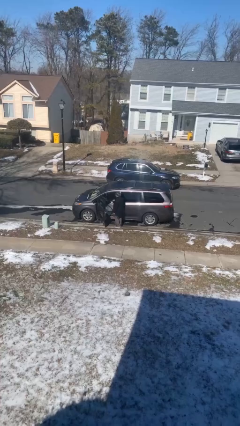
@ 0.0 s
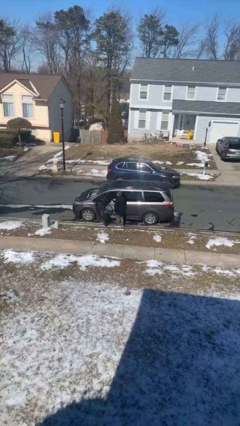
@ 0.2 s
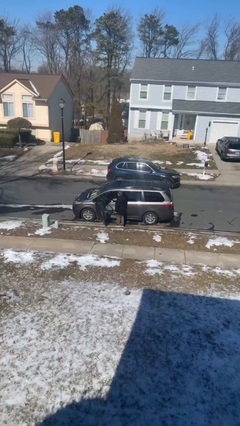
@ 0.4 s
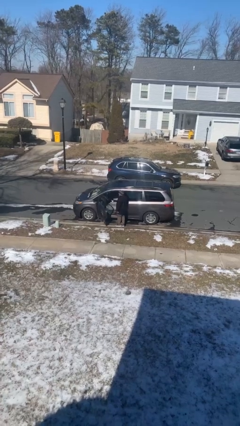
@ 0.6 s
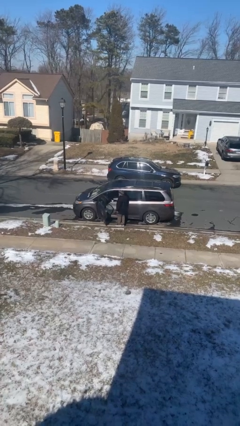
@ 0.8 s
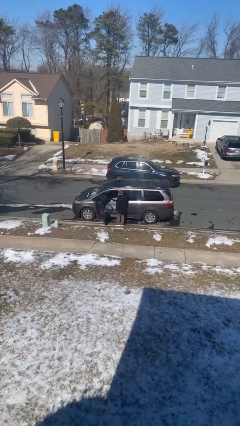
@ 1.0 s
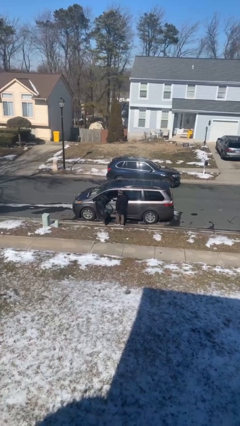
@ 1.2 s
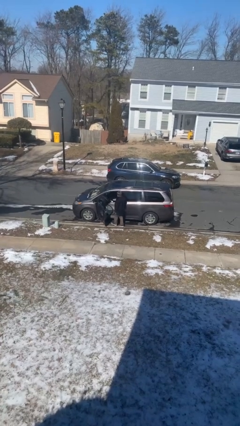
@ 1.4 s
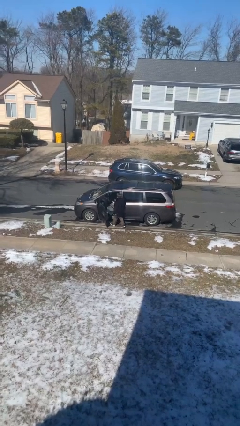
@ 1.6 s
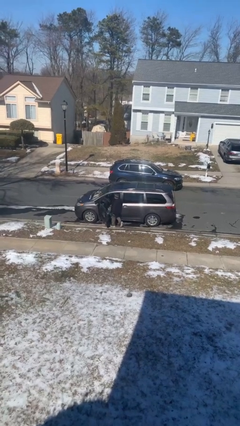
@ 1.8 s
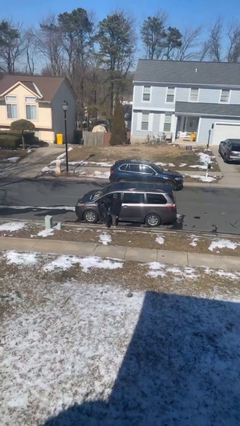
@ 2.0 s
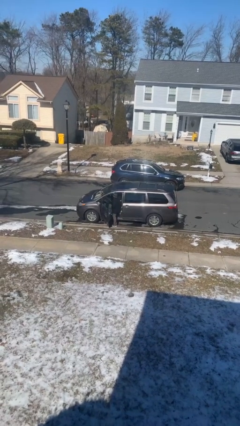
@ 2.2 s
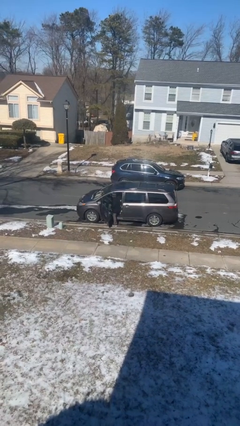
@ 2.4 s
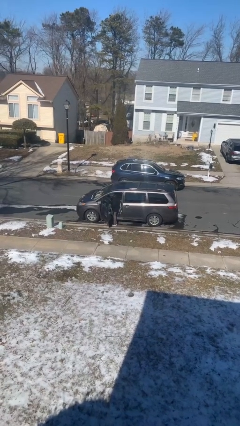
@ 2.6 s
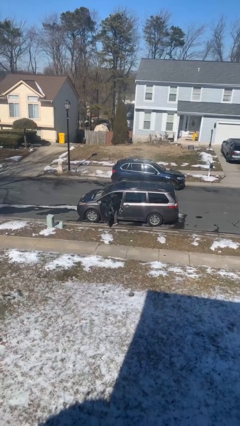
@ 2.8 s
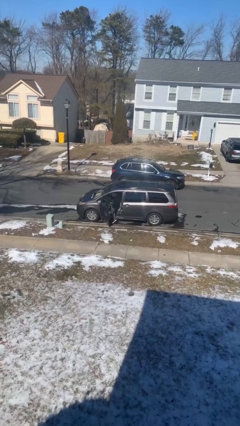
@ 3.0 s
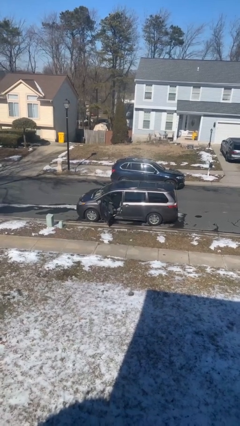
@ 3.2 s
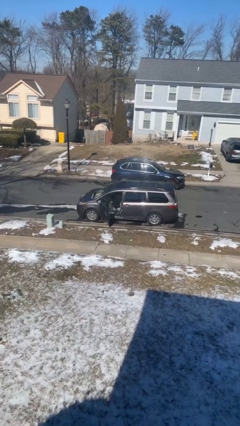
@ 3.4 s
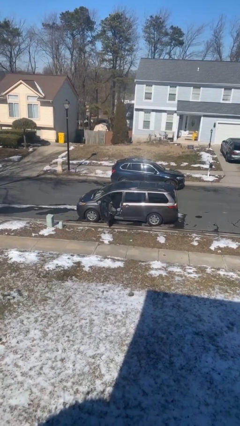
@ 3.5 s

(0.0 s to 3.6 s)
person enters car

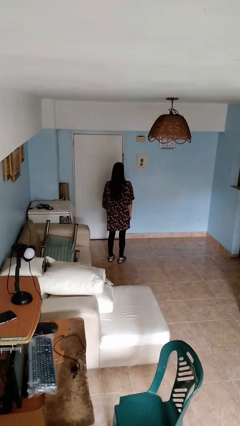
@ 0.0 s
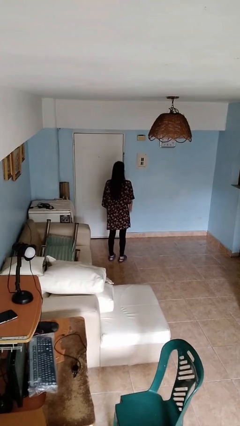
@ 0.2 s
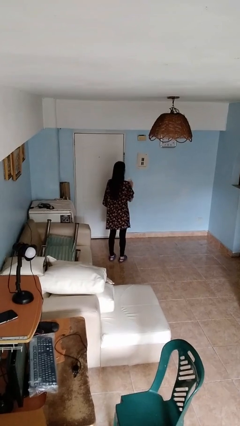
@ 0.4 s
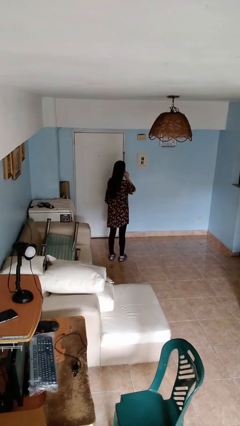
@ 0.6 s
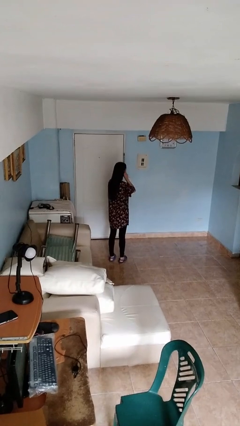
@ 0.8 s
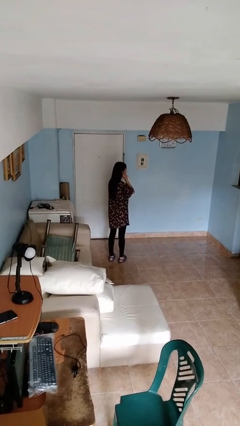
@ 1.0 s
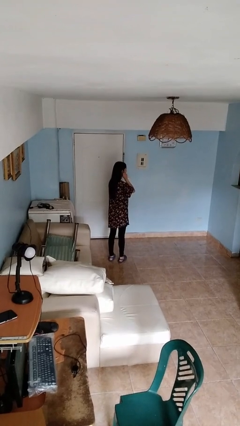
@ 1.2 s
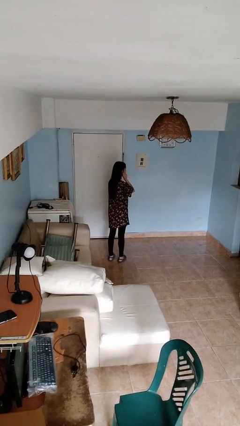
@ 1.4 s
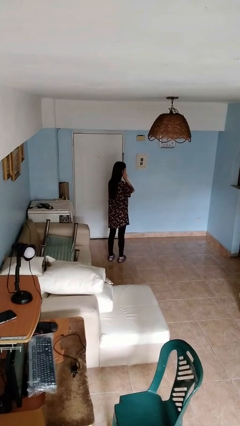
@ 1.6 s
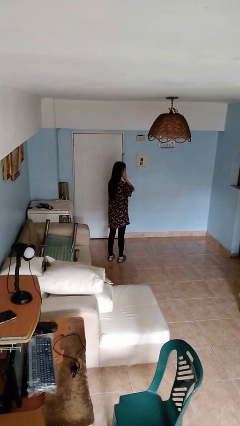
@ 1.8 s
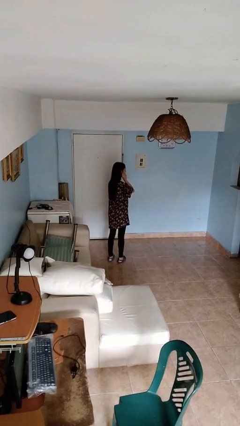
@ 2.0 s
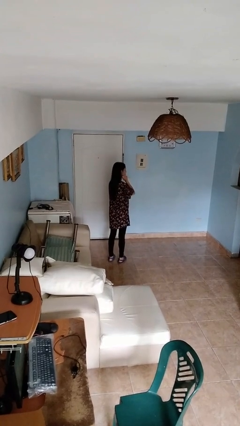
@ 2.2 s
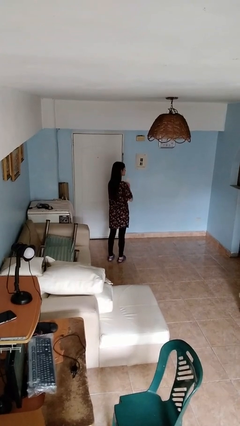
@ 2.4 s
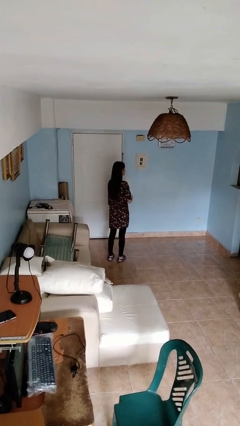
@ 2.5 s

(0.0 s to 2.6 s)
person touches earlobe

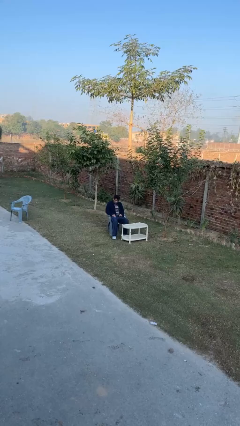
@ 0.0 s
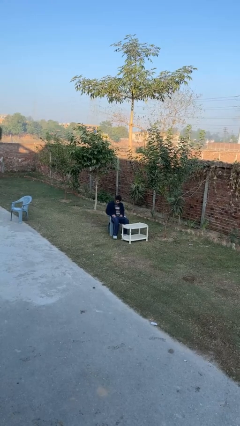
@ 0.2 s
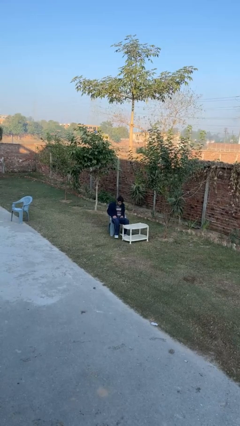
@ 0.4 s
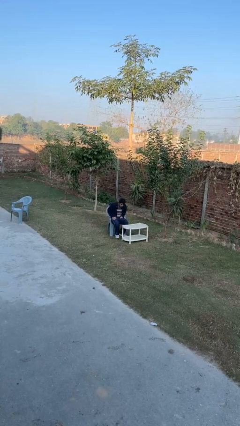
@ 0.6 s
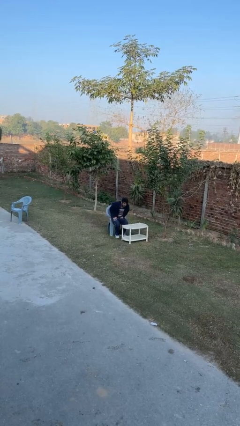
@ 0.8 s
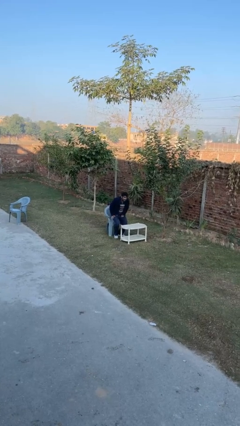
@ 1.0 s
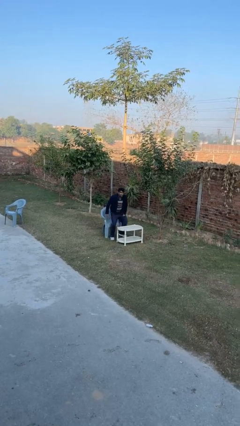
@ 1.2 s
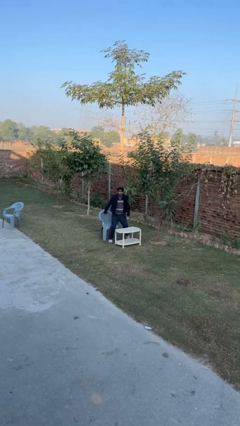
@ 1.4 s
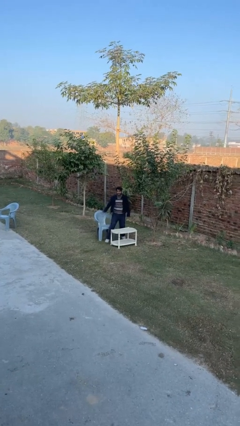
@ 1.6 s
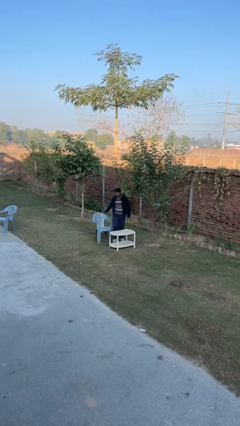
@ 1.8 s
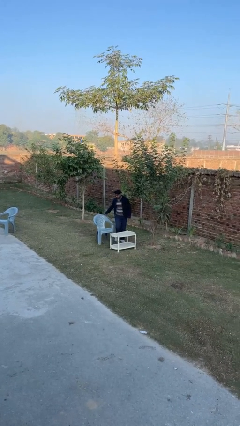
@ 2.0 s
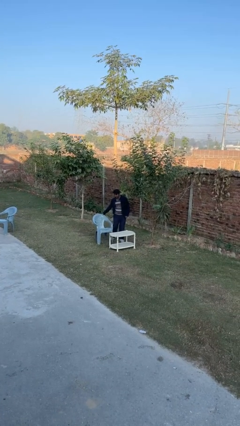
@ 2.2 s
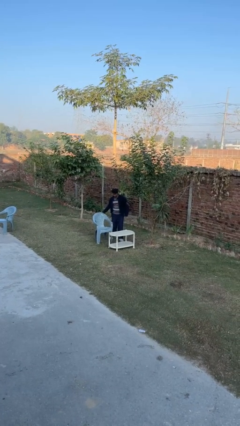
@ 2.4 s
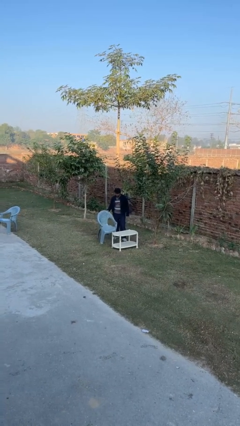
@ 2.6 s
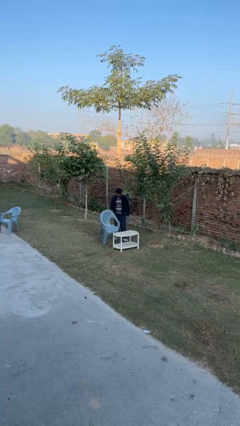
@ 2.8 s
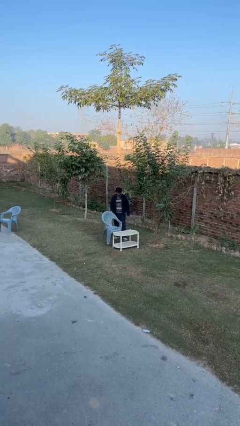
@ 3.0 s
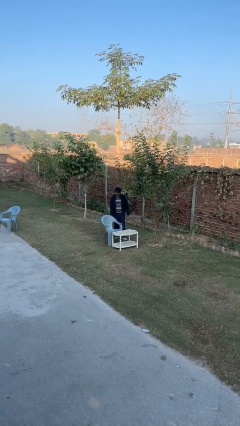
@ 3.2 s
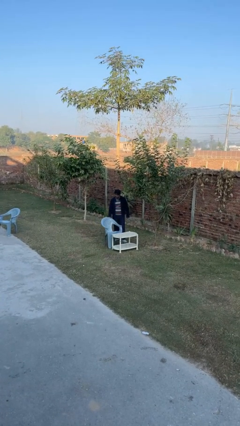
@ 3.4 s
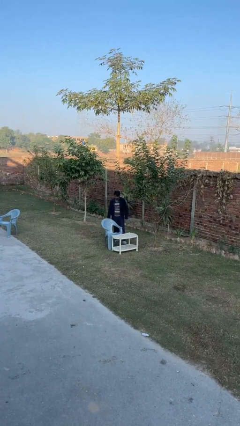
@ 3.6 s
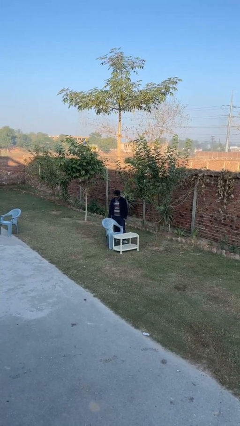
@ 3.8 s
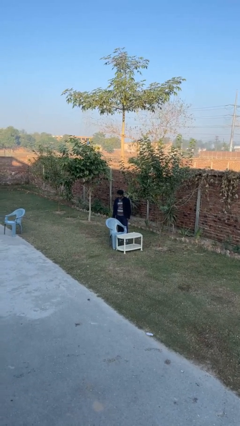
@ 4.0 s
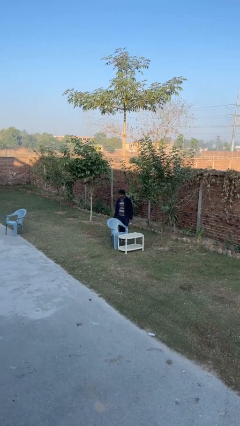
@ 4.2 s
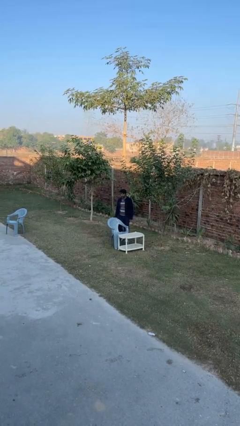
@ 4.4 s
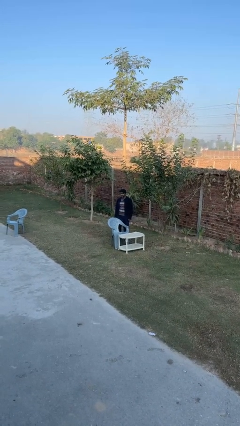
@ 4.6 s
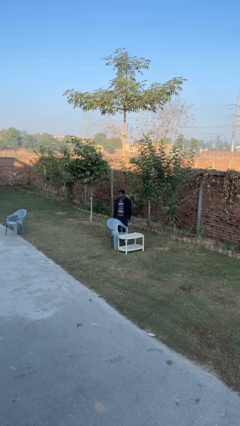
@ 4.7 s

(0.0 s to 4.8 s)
person stands up

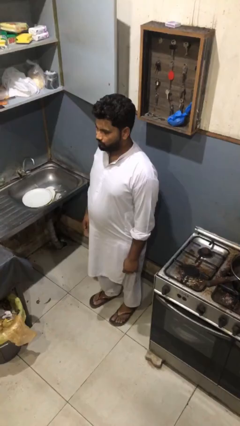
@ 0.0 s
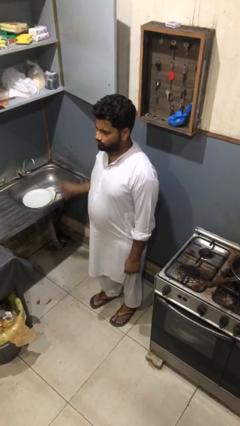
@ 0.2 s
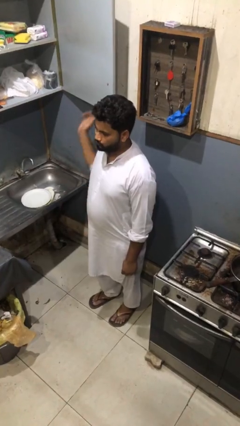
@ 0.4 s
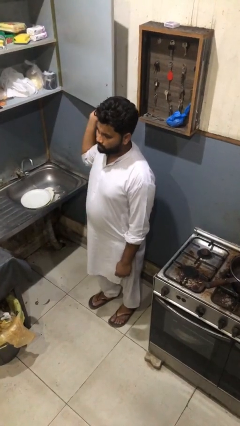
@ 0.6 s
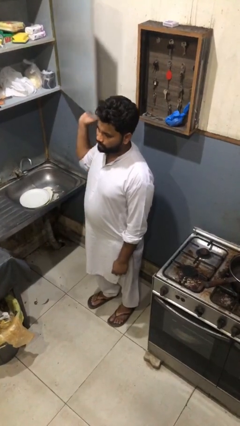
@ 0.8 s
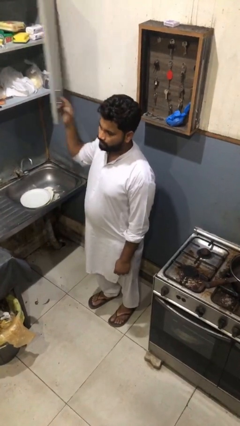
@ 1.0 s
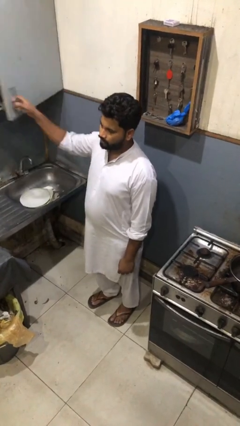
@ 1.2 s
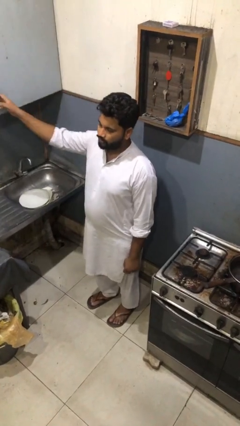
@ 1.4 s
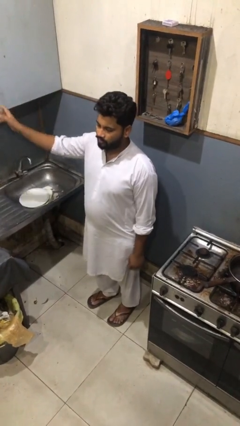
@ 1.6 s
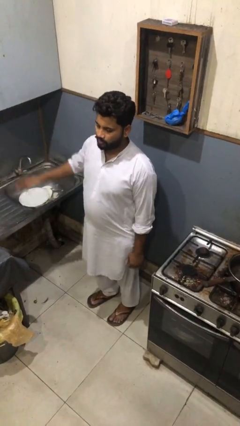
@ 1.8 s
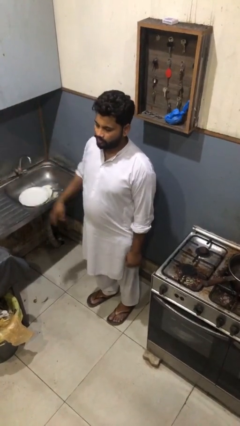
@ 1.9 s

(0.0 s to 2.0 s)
person closes cabinet

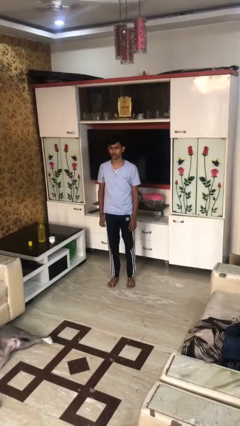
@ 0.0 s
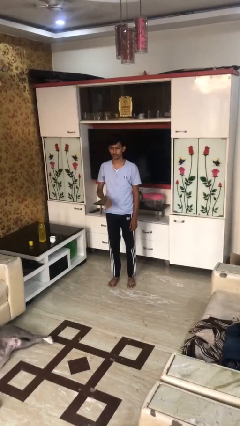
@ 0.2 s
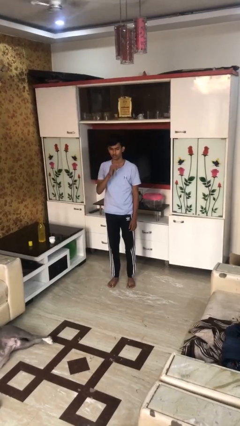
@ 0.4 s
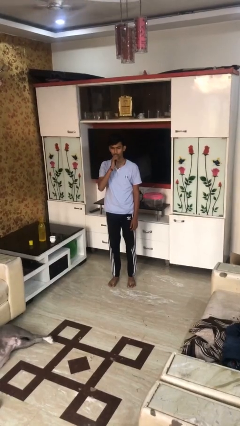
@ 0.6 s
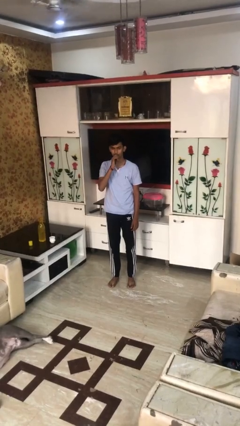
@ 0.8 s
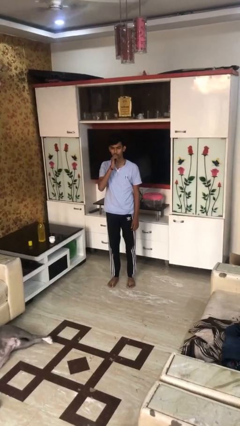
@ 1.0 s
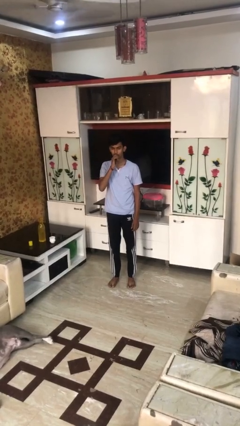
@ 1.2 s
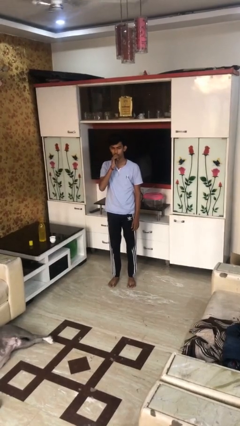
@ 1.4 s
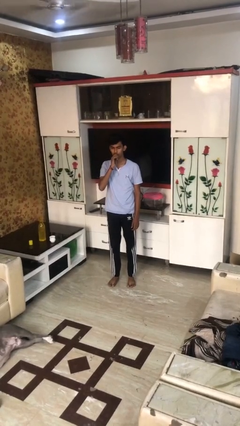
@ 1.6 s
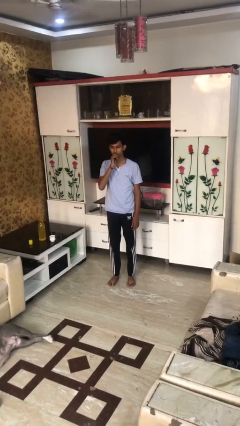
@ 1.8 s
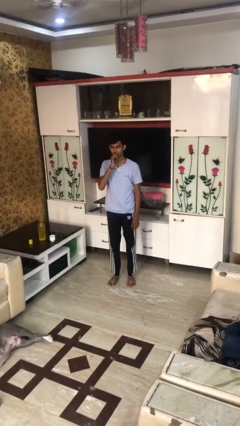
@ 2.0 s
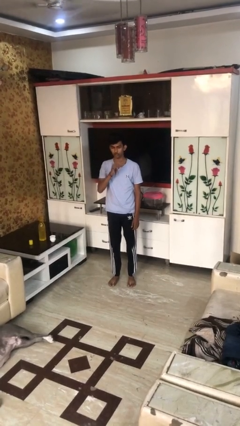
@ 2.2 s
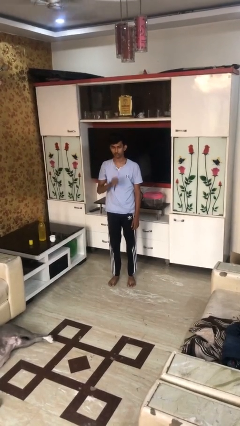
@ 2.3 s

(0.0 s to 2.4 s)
person vapes

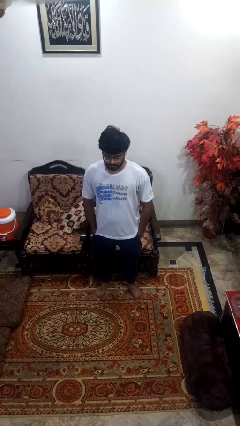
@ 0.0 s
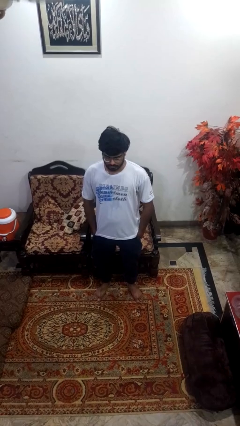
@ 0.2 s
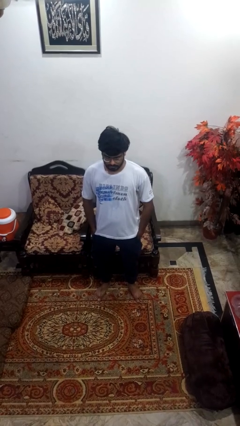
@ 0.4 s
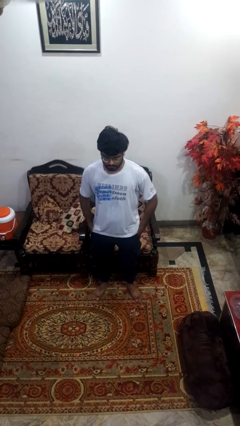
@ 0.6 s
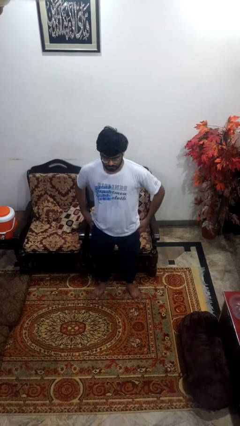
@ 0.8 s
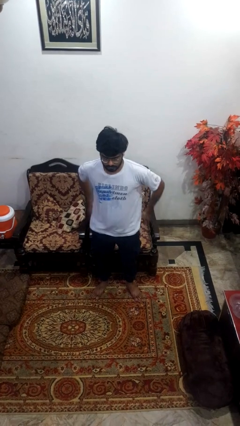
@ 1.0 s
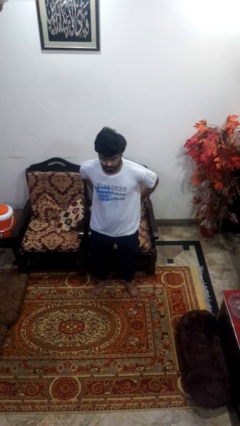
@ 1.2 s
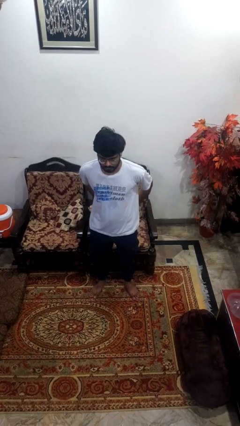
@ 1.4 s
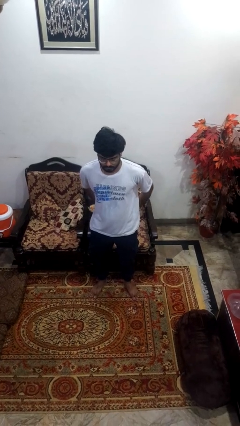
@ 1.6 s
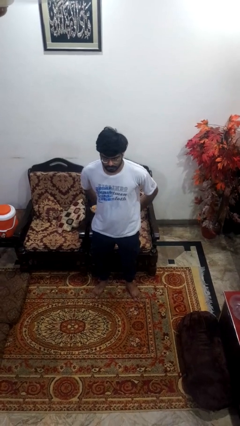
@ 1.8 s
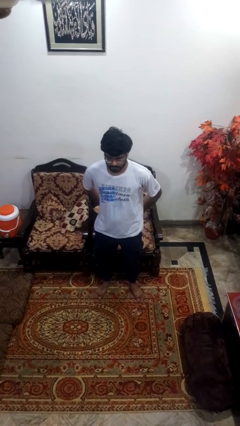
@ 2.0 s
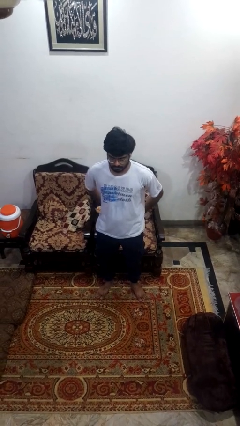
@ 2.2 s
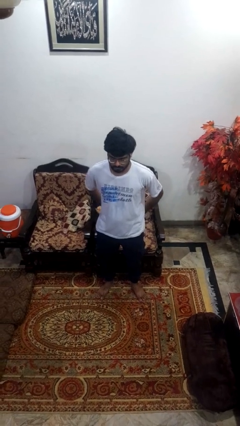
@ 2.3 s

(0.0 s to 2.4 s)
person puts hands in back pockets
